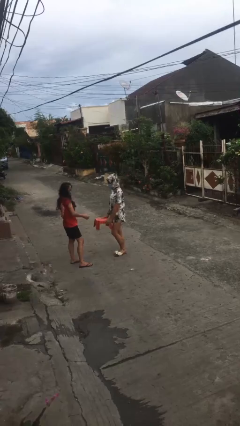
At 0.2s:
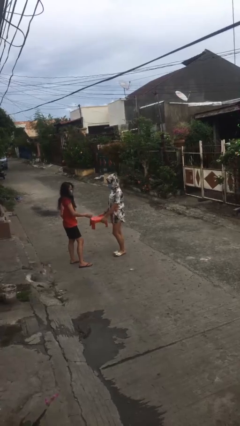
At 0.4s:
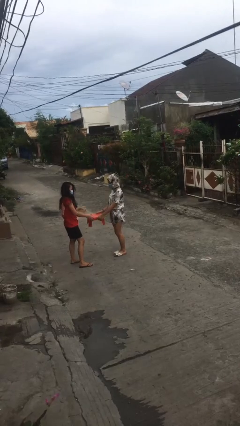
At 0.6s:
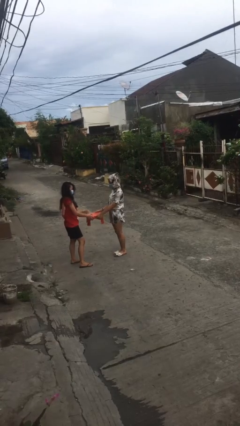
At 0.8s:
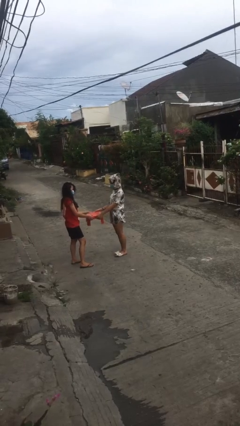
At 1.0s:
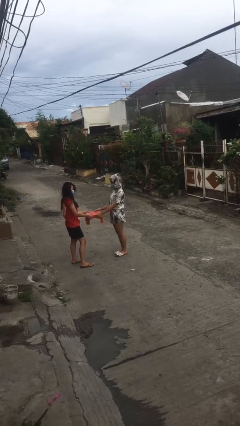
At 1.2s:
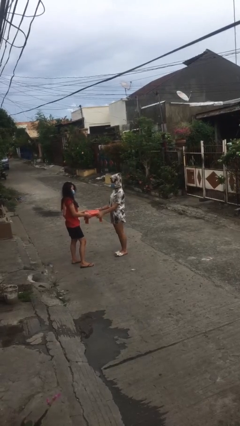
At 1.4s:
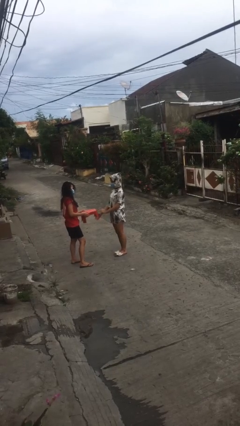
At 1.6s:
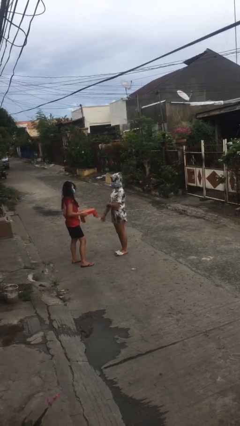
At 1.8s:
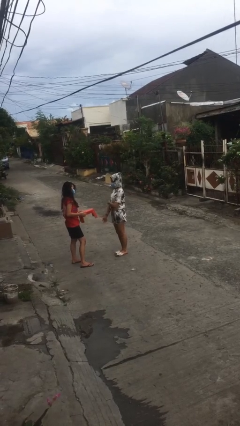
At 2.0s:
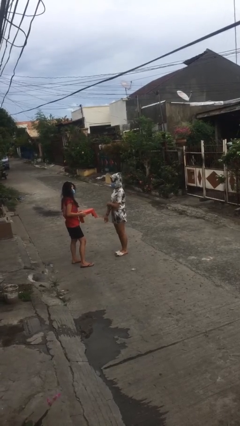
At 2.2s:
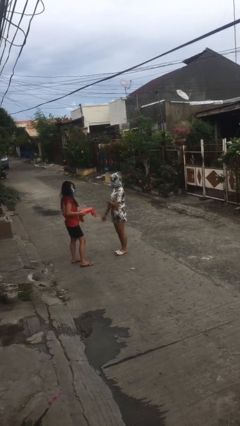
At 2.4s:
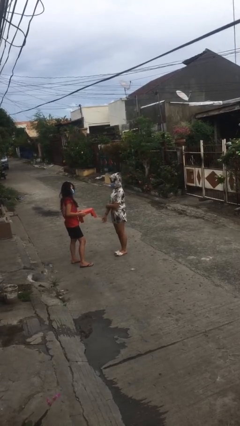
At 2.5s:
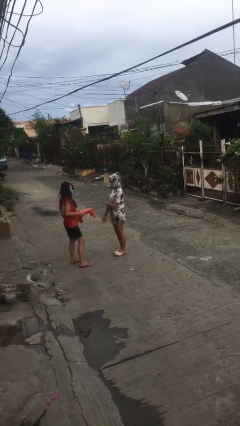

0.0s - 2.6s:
person transfers object to person

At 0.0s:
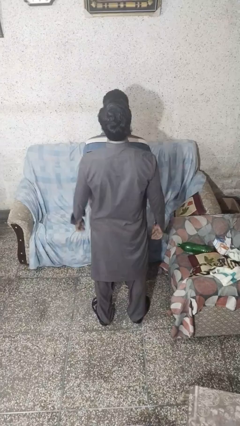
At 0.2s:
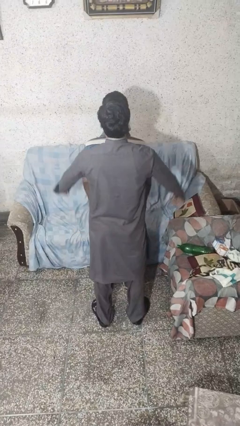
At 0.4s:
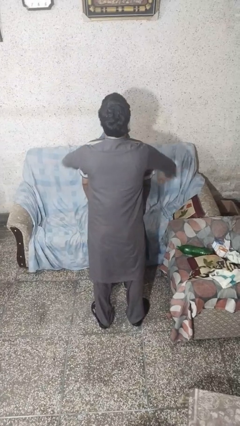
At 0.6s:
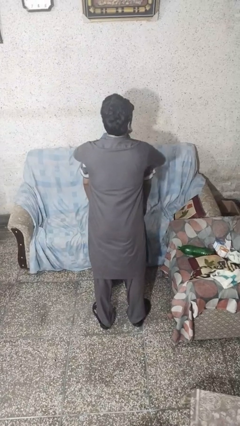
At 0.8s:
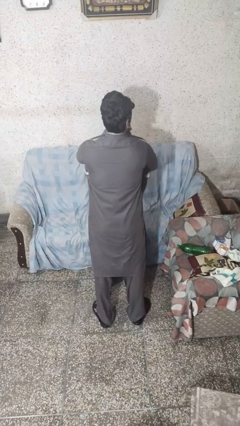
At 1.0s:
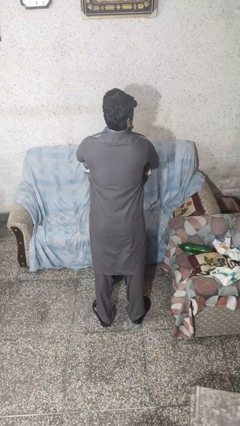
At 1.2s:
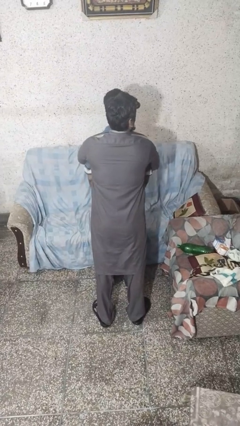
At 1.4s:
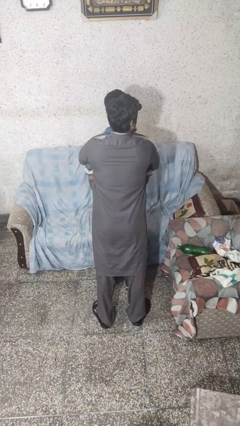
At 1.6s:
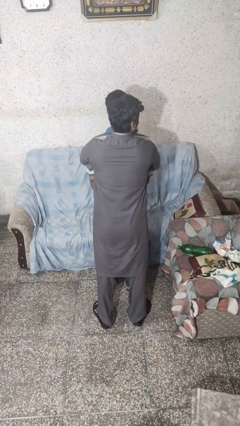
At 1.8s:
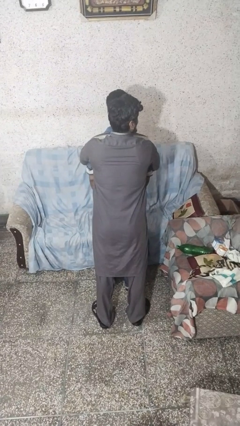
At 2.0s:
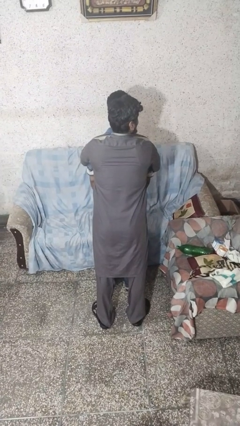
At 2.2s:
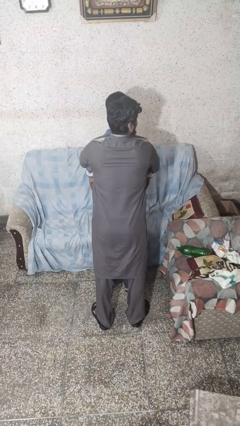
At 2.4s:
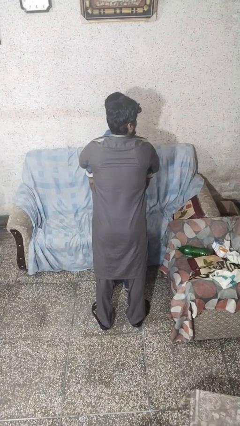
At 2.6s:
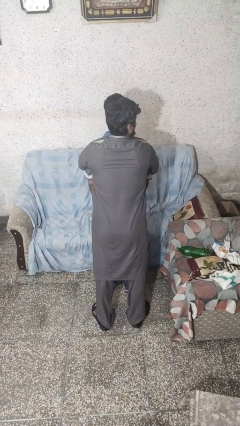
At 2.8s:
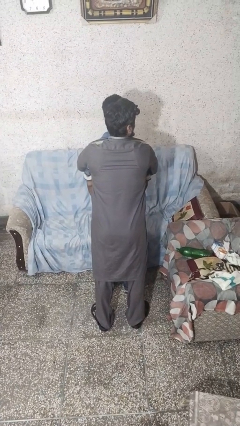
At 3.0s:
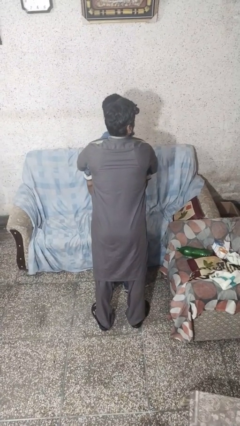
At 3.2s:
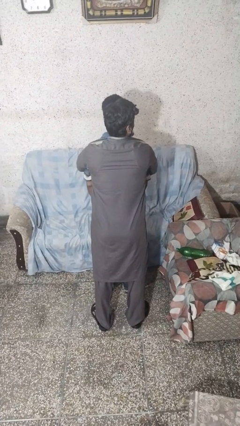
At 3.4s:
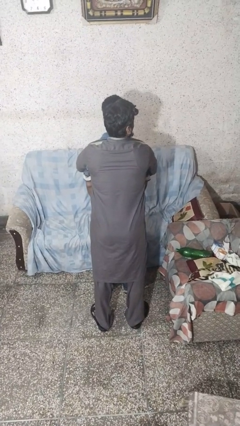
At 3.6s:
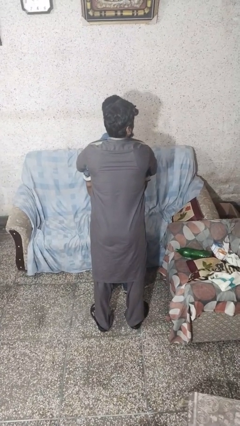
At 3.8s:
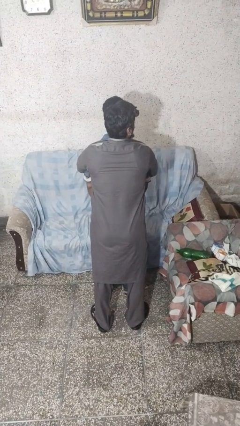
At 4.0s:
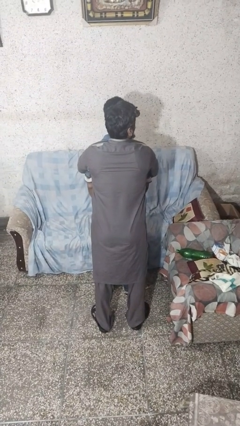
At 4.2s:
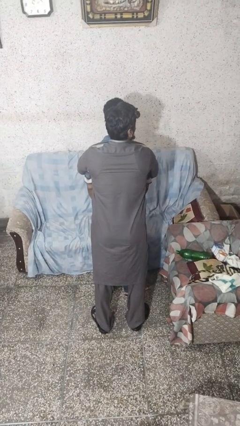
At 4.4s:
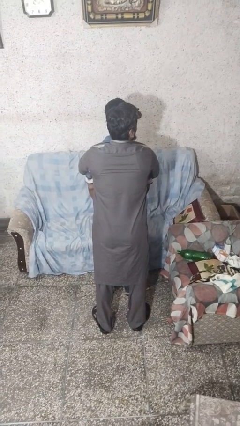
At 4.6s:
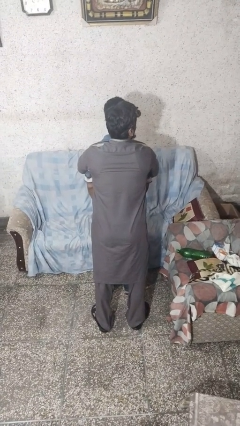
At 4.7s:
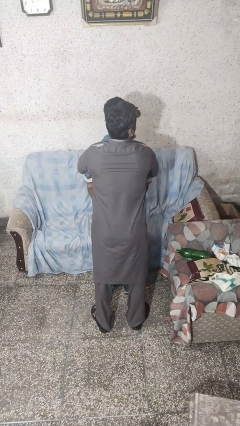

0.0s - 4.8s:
person hugs person from behind

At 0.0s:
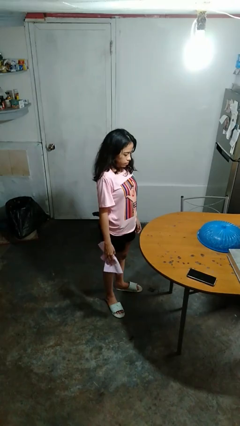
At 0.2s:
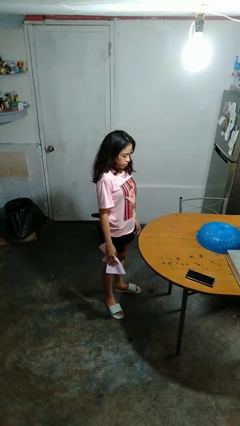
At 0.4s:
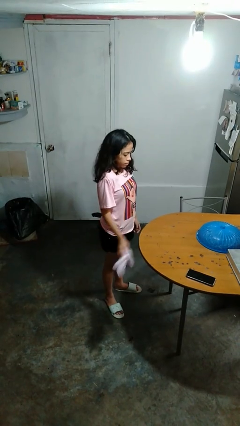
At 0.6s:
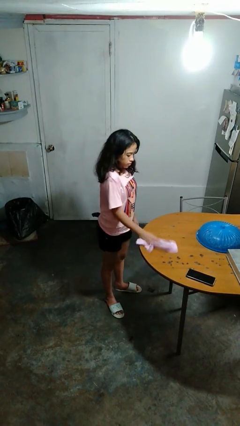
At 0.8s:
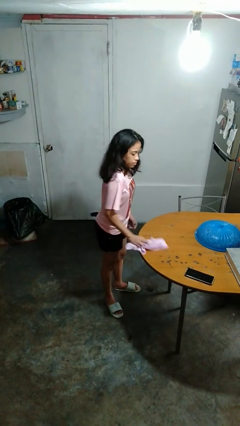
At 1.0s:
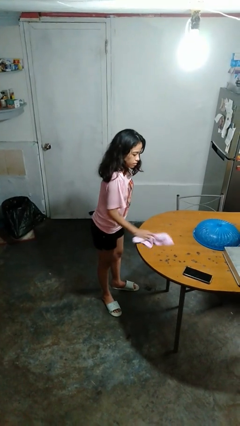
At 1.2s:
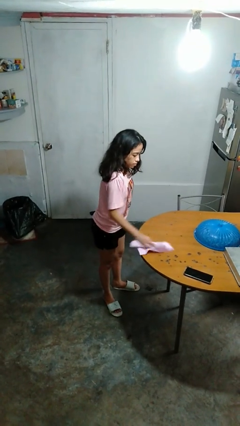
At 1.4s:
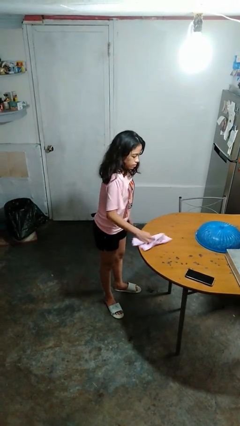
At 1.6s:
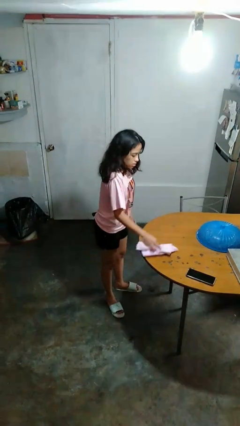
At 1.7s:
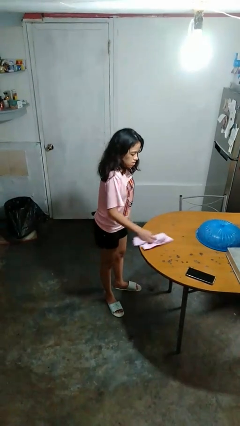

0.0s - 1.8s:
person cleans table with rag

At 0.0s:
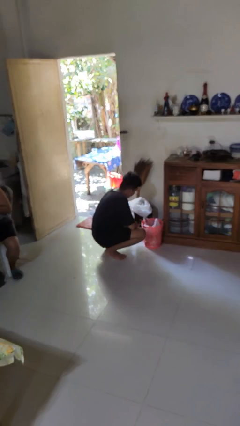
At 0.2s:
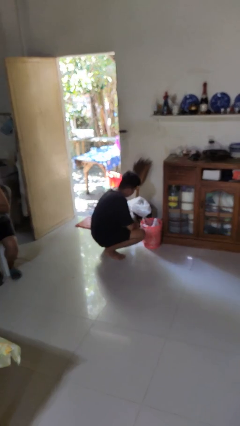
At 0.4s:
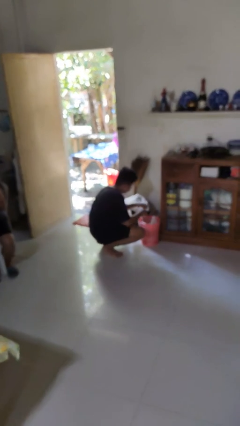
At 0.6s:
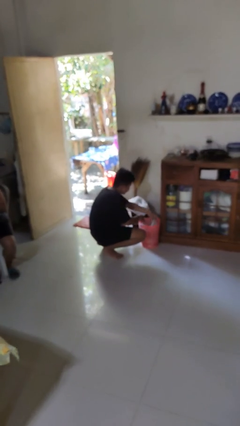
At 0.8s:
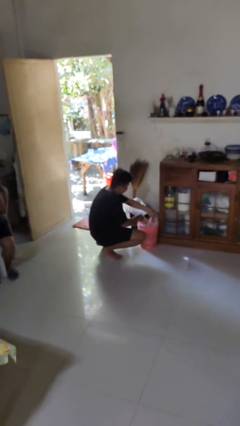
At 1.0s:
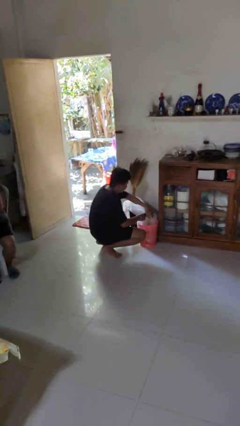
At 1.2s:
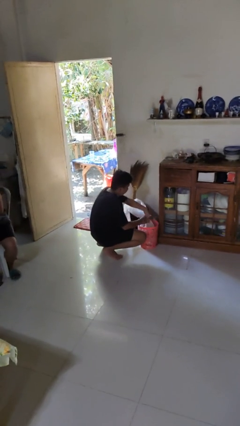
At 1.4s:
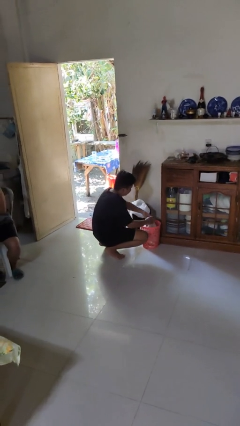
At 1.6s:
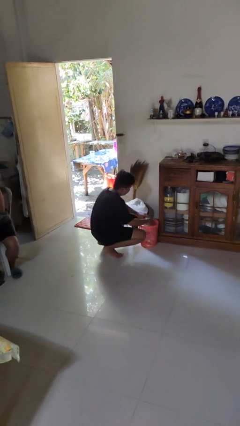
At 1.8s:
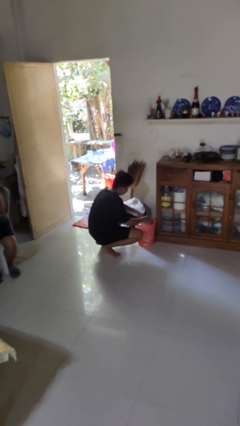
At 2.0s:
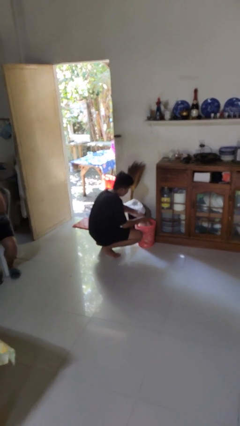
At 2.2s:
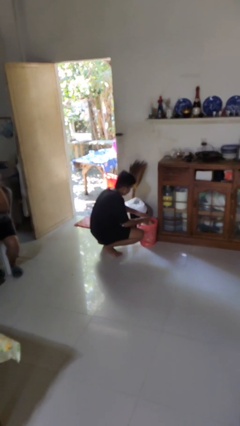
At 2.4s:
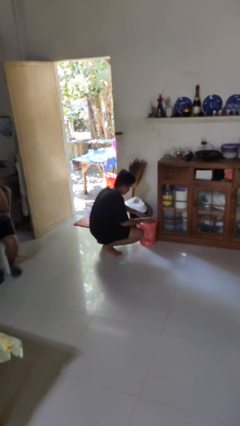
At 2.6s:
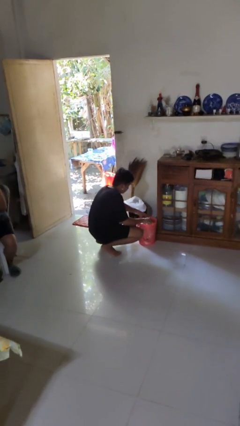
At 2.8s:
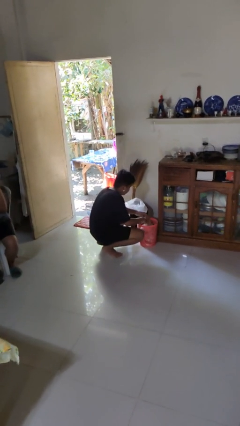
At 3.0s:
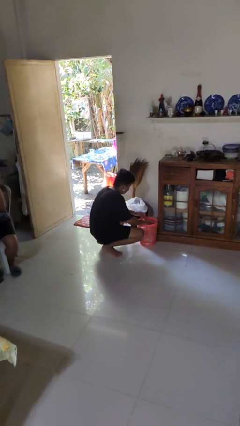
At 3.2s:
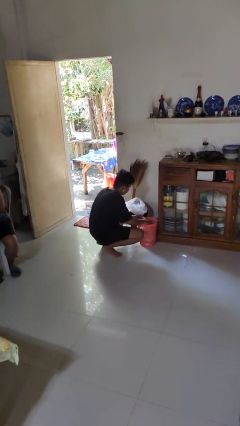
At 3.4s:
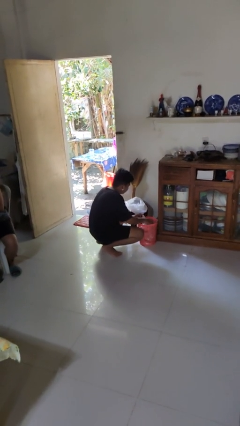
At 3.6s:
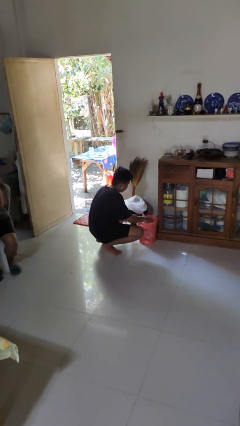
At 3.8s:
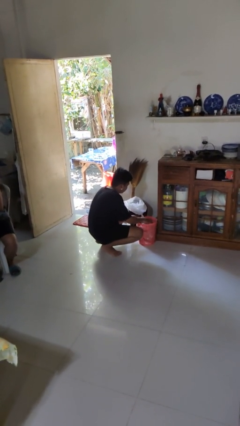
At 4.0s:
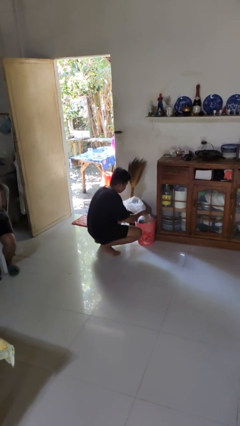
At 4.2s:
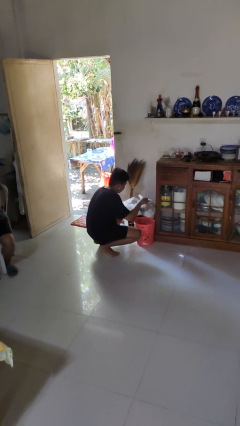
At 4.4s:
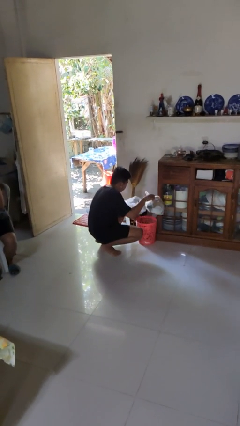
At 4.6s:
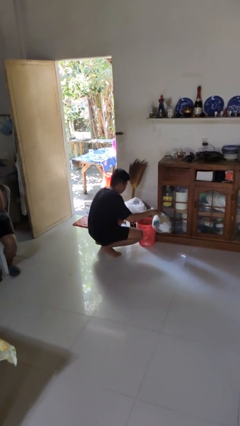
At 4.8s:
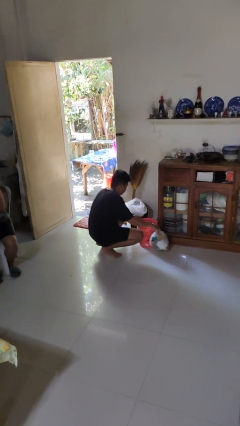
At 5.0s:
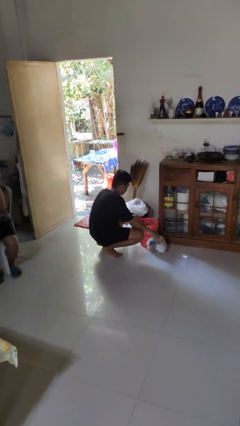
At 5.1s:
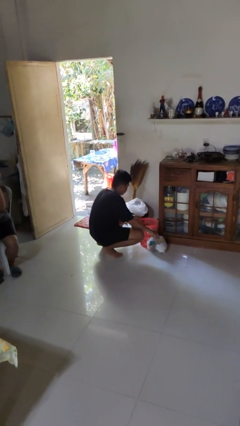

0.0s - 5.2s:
person removes trashbag from trashcan

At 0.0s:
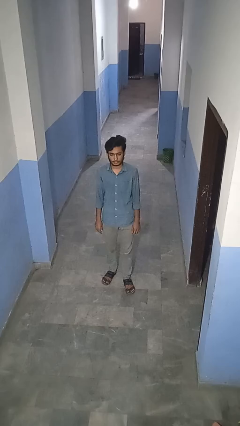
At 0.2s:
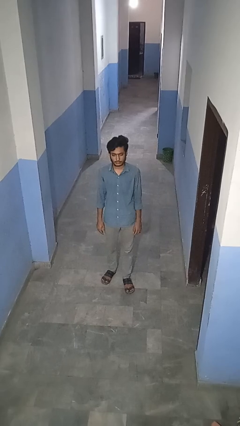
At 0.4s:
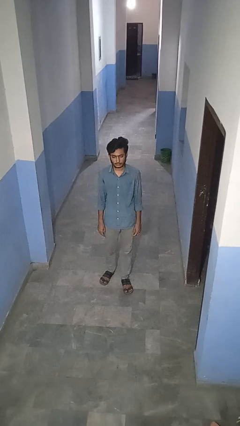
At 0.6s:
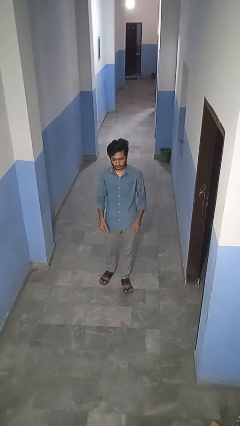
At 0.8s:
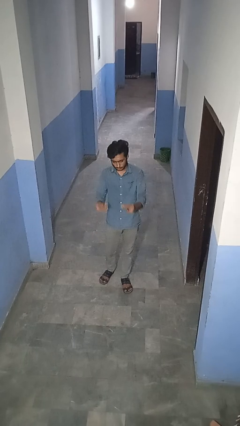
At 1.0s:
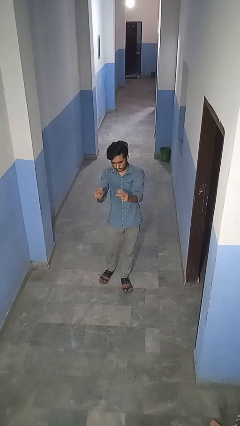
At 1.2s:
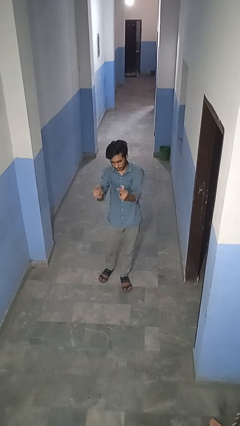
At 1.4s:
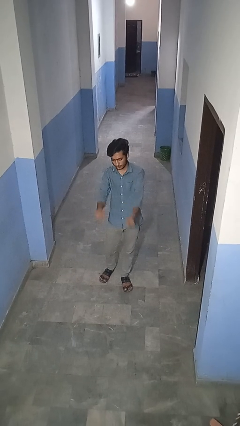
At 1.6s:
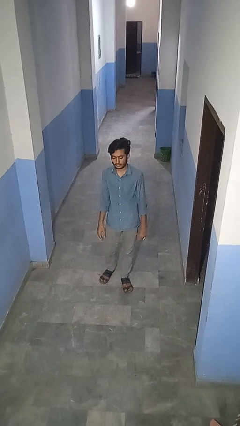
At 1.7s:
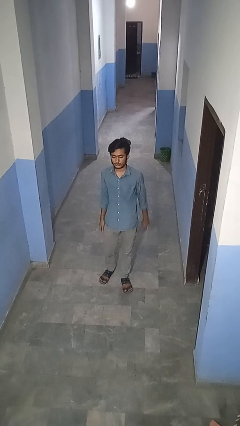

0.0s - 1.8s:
person snaps fingers

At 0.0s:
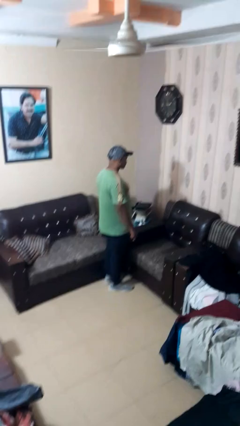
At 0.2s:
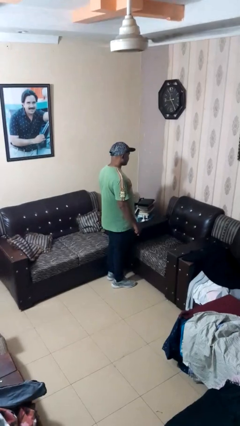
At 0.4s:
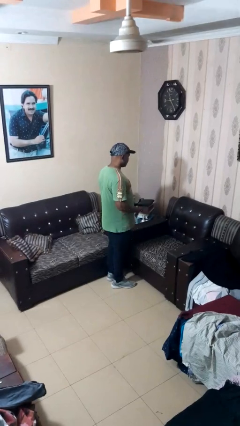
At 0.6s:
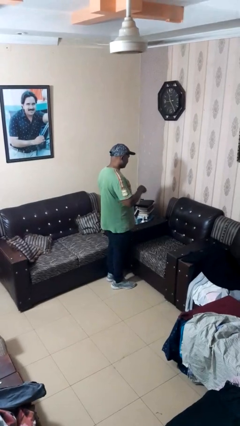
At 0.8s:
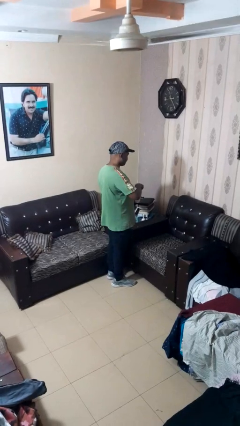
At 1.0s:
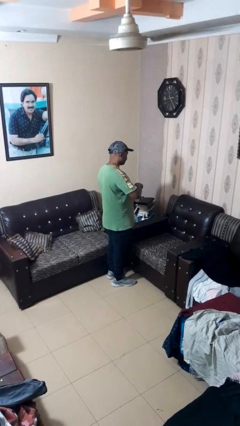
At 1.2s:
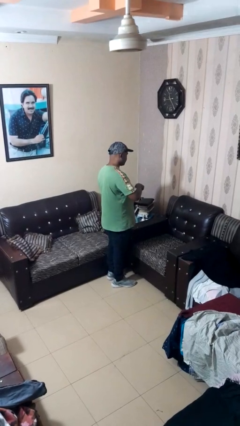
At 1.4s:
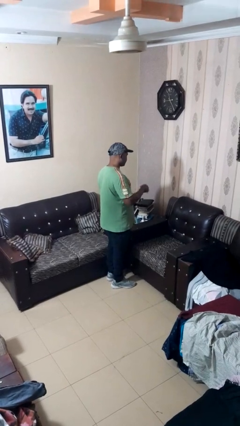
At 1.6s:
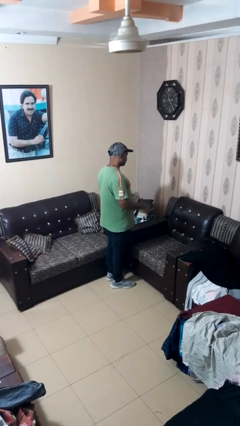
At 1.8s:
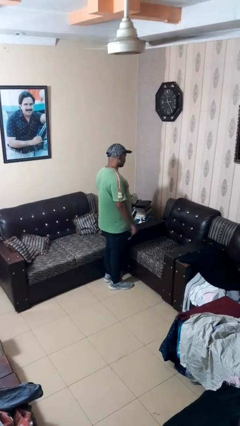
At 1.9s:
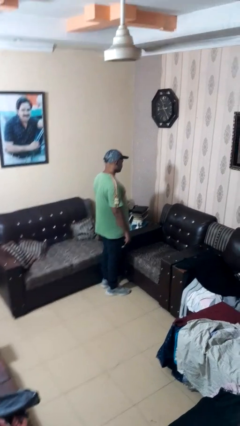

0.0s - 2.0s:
person stirs mug
